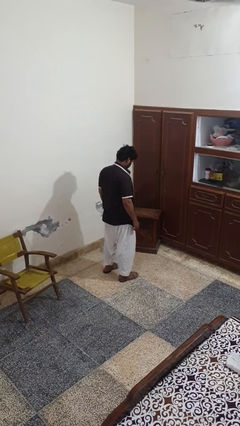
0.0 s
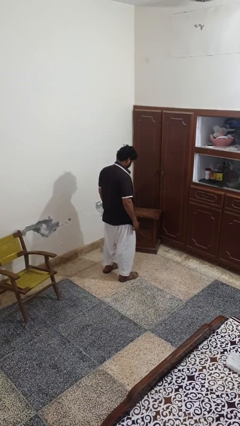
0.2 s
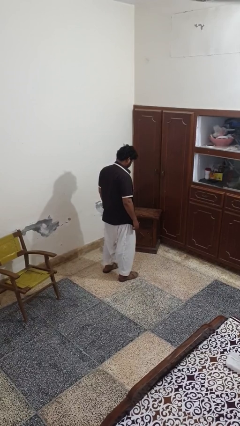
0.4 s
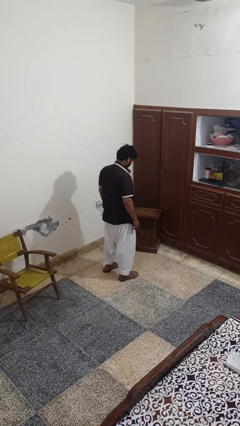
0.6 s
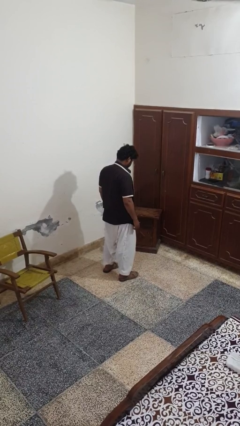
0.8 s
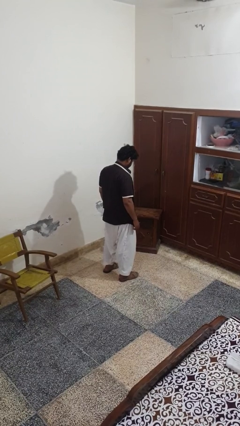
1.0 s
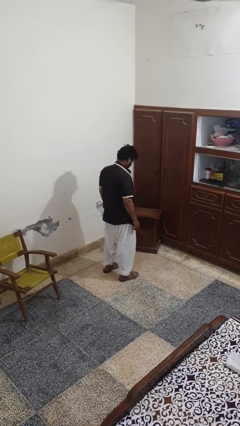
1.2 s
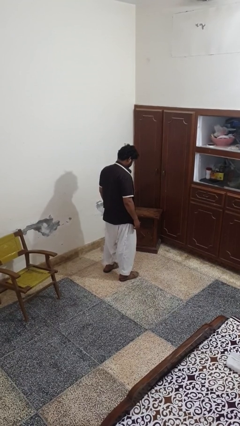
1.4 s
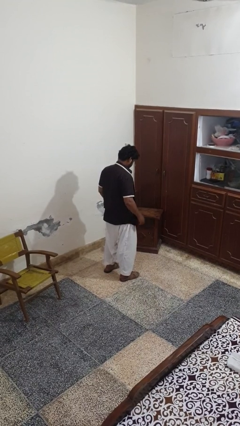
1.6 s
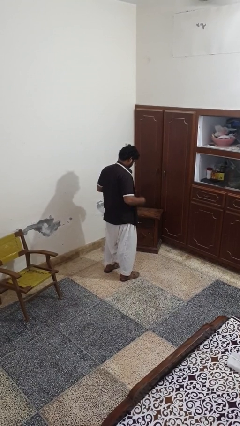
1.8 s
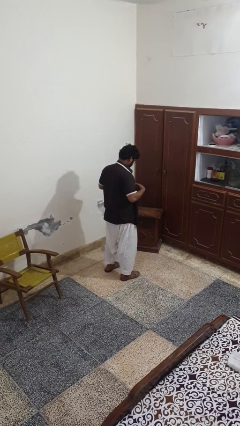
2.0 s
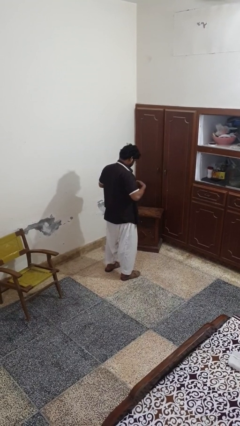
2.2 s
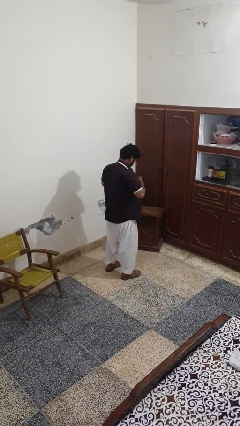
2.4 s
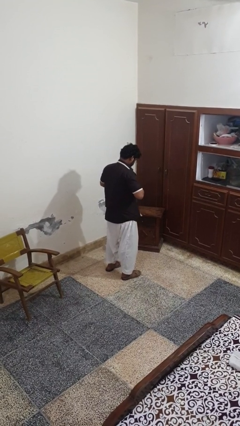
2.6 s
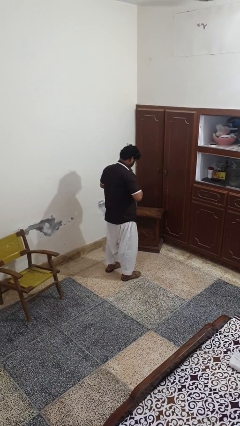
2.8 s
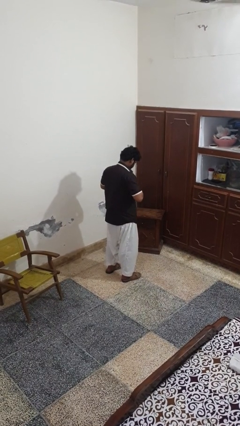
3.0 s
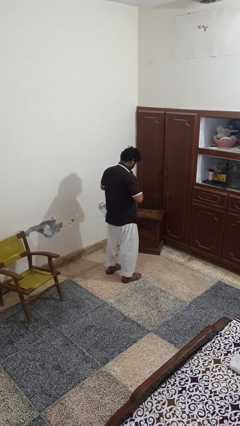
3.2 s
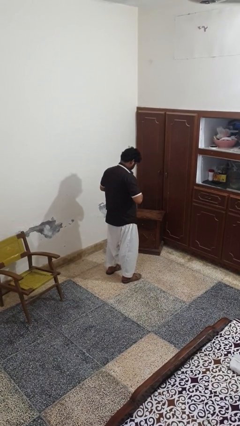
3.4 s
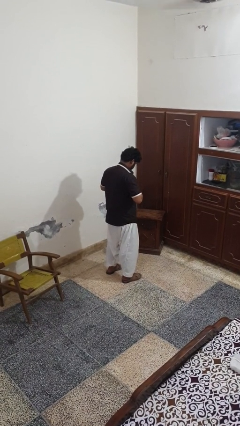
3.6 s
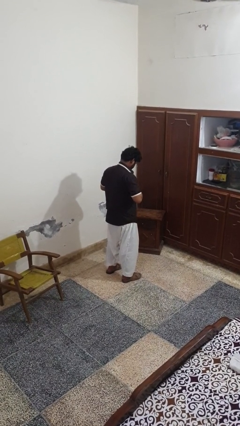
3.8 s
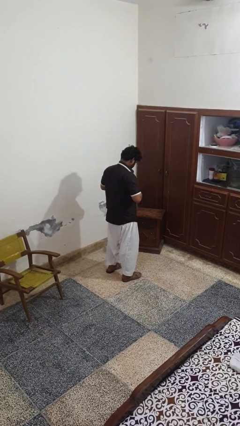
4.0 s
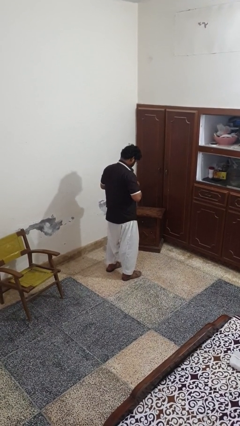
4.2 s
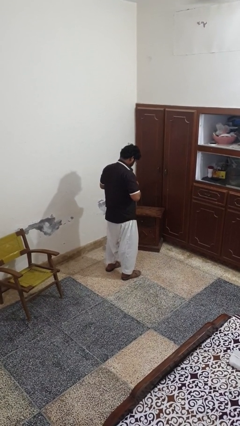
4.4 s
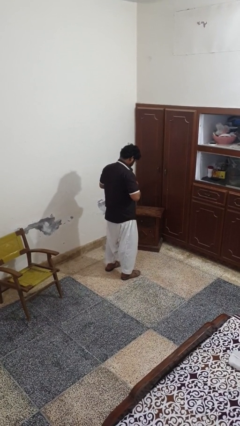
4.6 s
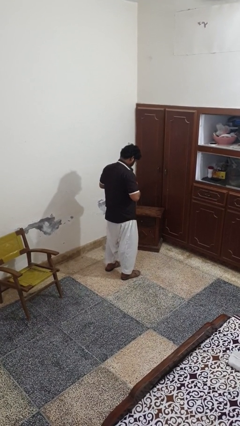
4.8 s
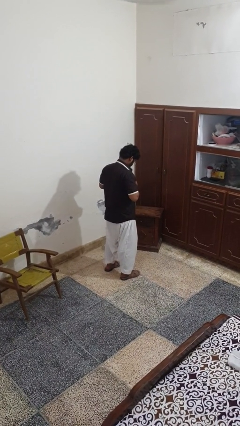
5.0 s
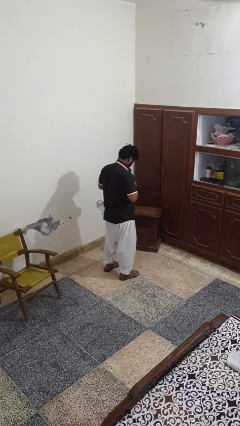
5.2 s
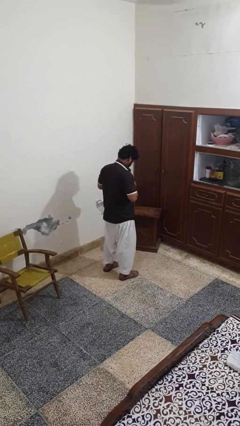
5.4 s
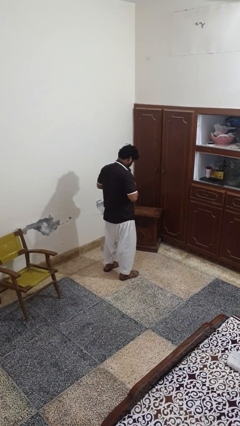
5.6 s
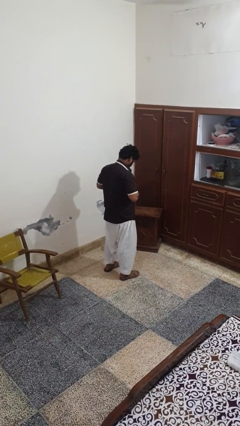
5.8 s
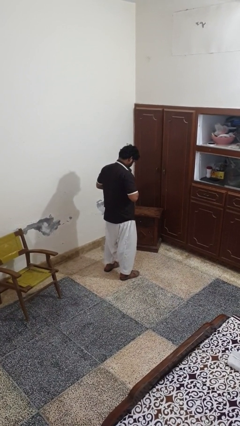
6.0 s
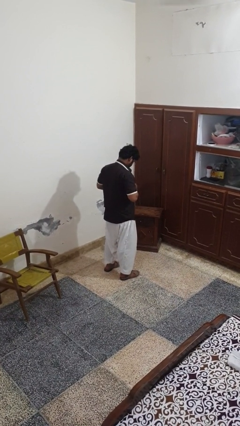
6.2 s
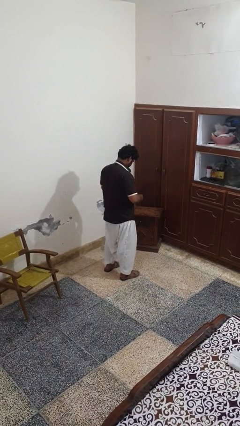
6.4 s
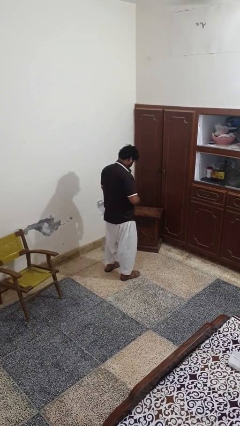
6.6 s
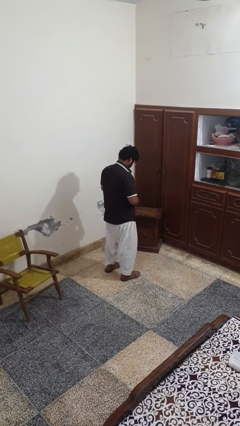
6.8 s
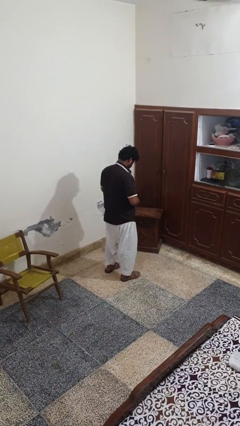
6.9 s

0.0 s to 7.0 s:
person buttons shirt

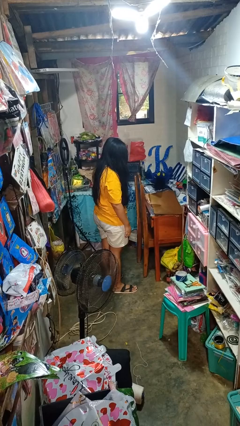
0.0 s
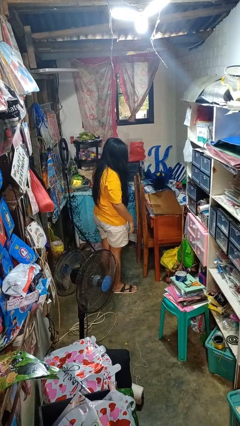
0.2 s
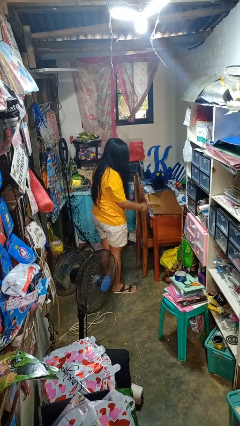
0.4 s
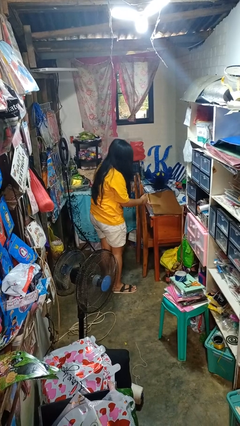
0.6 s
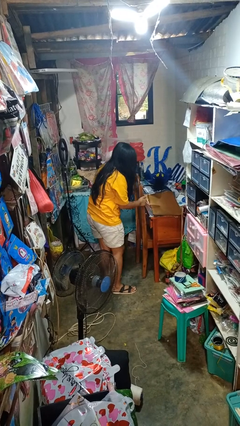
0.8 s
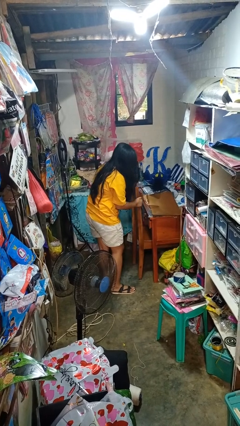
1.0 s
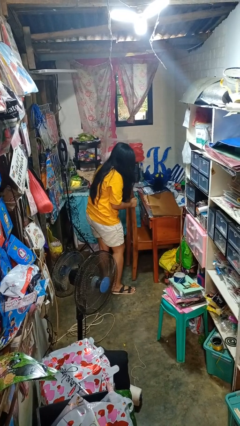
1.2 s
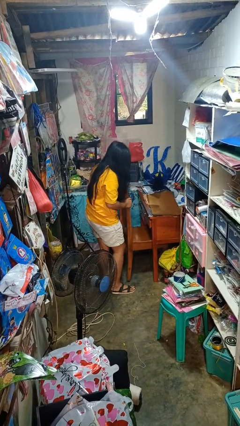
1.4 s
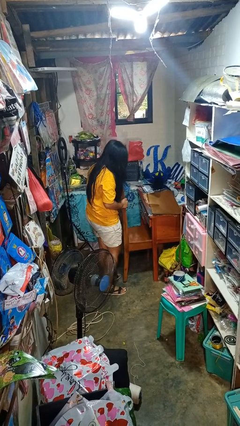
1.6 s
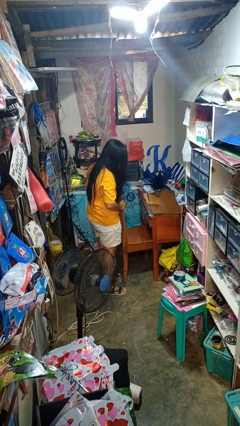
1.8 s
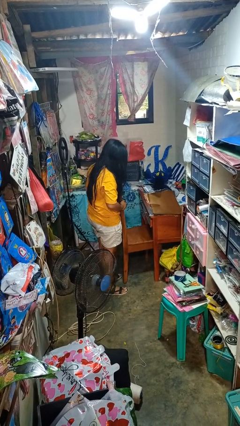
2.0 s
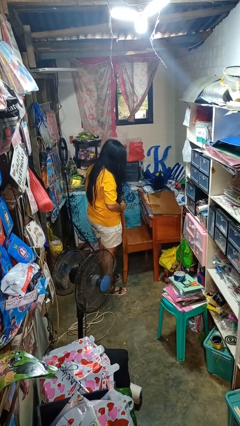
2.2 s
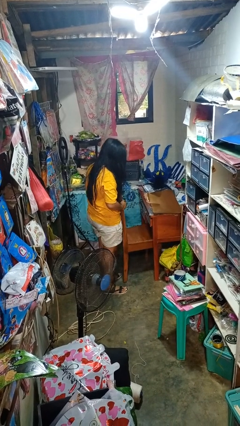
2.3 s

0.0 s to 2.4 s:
person pulls out chair

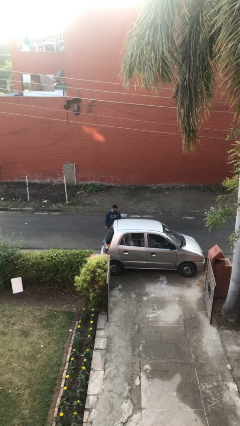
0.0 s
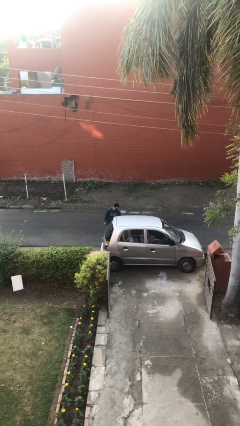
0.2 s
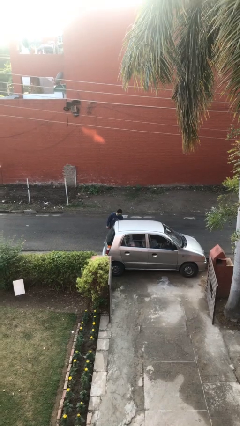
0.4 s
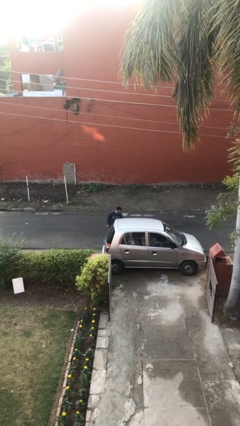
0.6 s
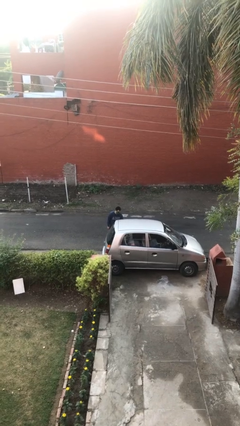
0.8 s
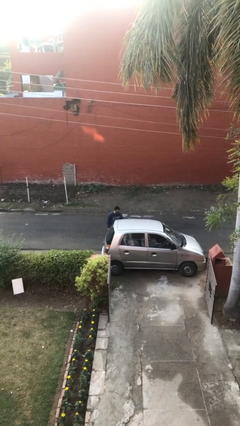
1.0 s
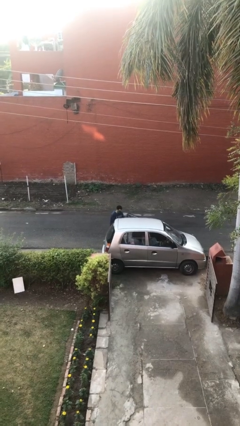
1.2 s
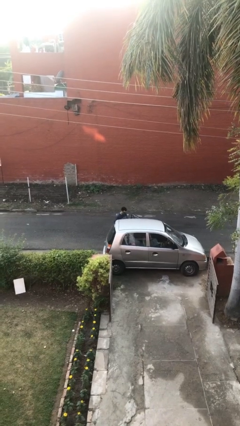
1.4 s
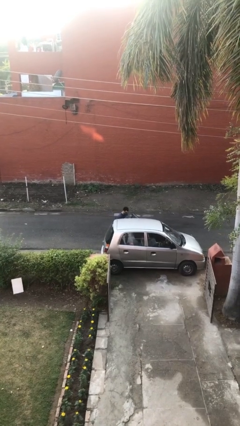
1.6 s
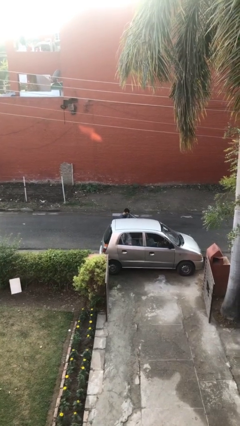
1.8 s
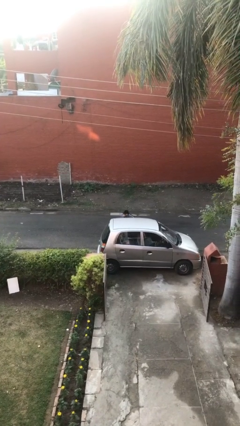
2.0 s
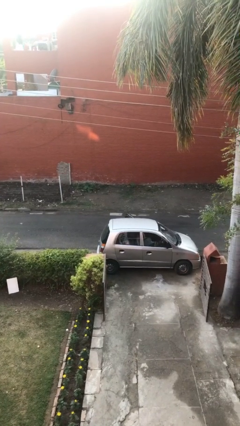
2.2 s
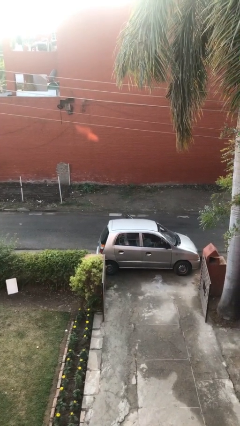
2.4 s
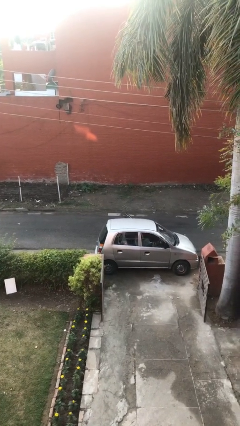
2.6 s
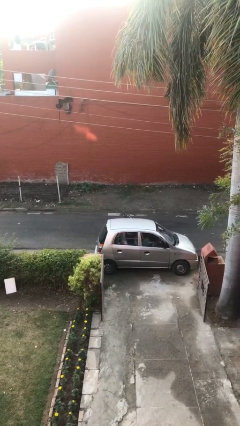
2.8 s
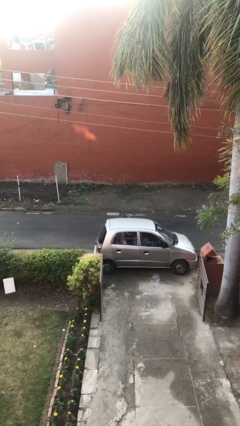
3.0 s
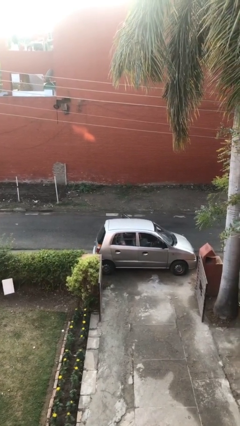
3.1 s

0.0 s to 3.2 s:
person enters car

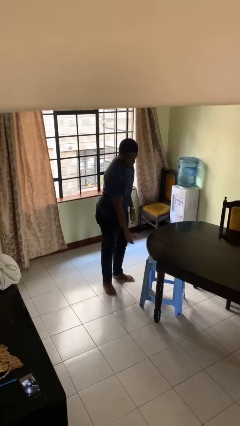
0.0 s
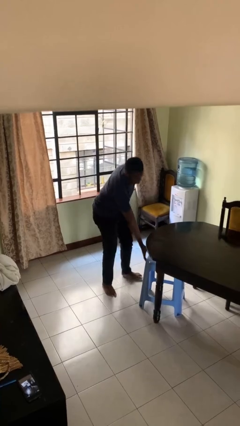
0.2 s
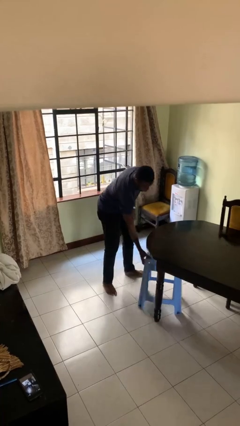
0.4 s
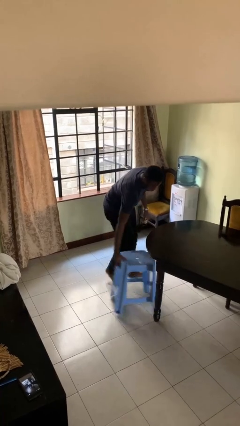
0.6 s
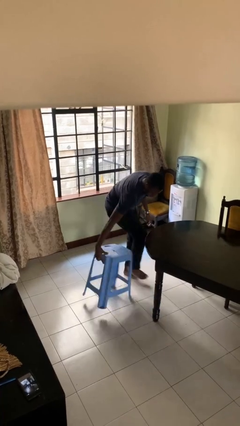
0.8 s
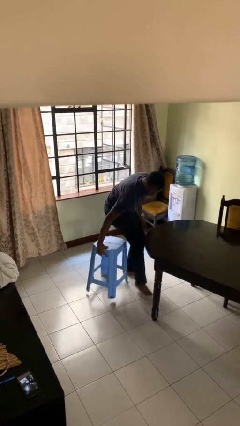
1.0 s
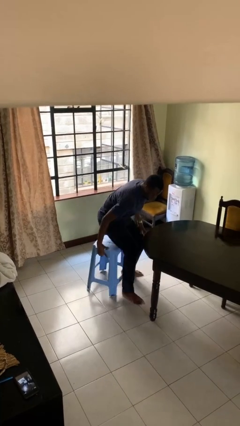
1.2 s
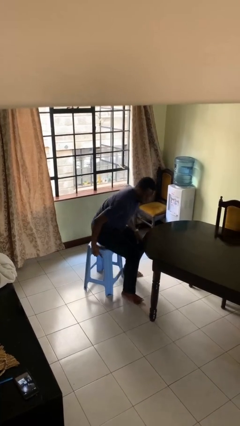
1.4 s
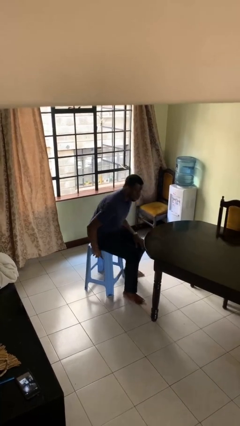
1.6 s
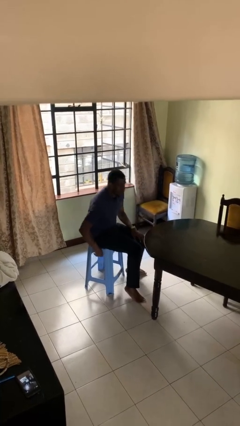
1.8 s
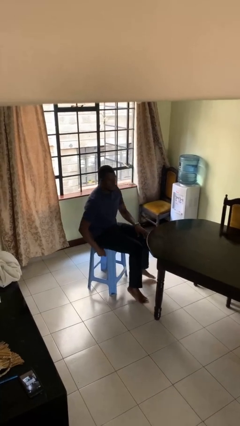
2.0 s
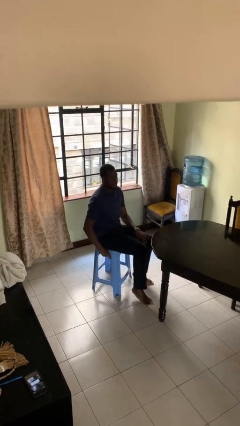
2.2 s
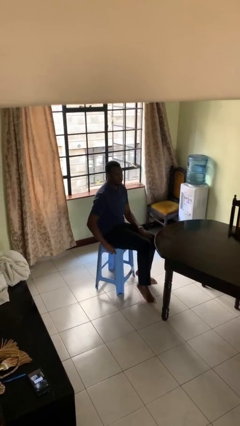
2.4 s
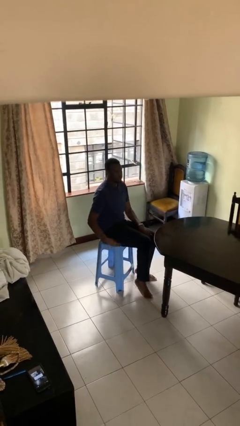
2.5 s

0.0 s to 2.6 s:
person sits down

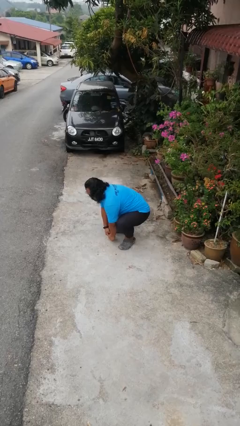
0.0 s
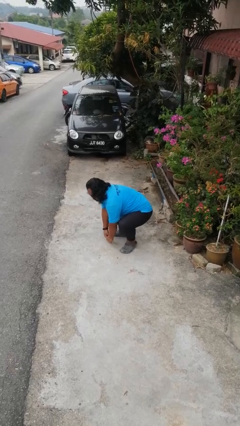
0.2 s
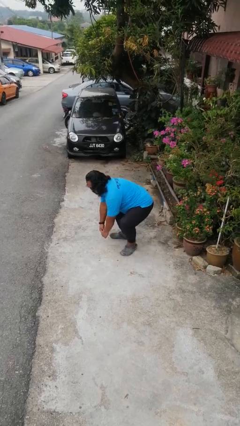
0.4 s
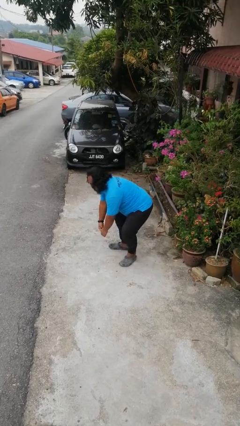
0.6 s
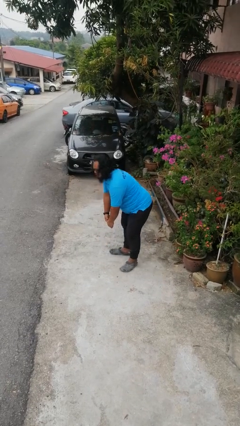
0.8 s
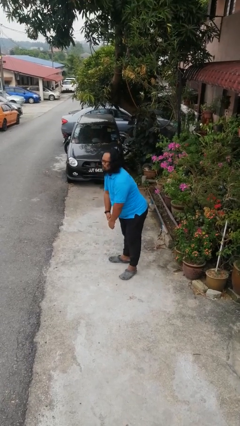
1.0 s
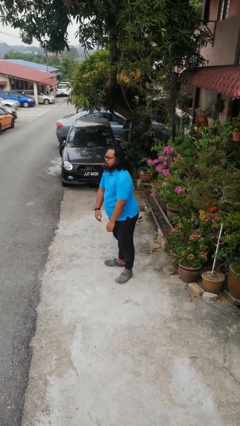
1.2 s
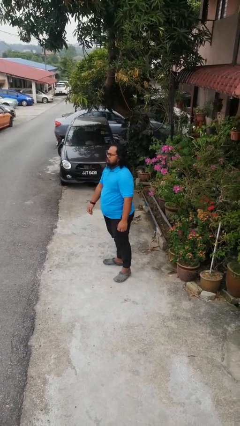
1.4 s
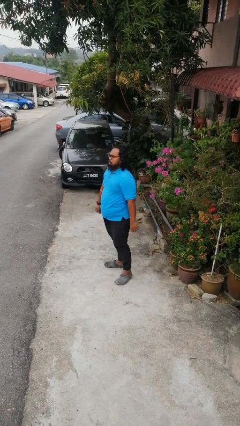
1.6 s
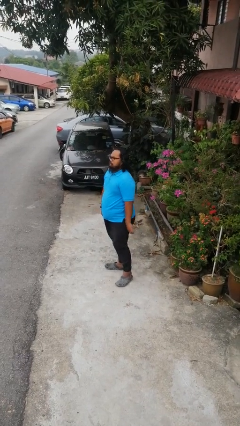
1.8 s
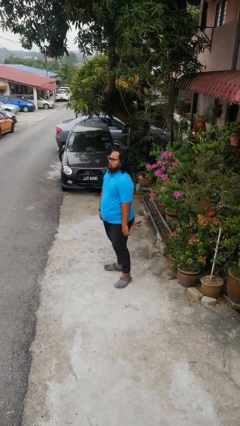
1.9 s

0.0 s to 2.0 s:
person stands up

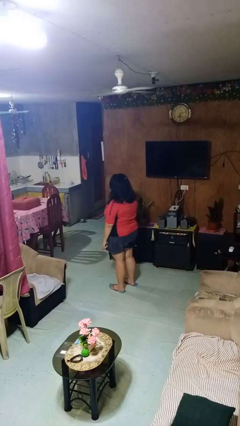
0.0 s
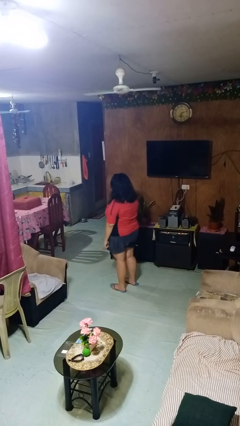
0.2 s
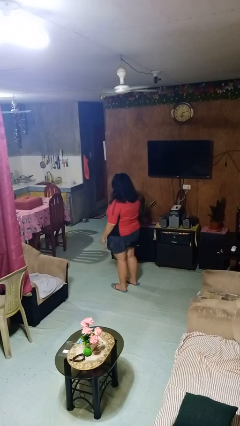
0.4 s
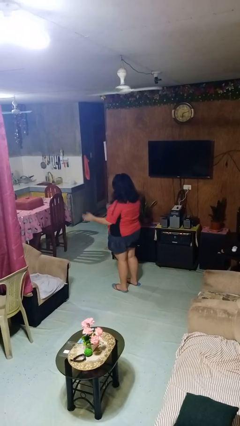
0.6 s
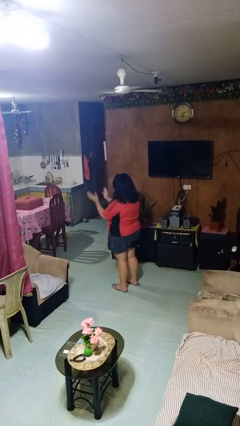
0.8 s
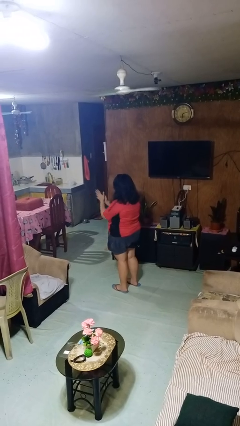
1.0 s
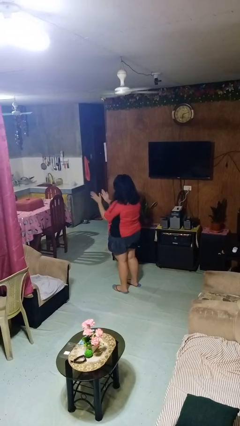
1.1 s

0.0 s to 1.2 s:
person claps hands
